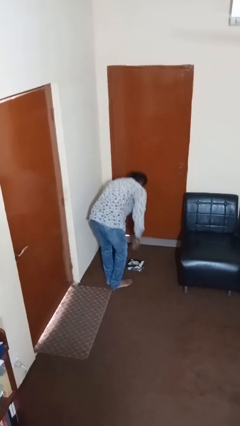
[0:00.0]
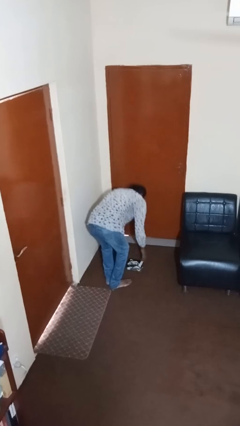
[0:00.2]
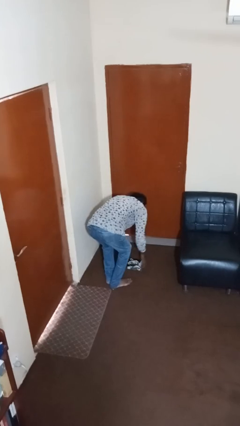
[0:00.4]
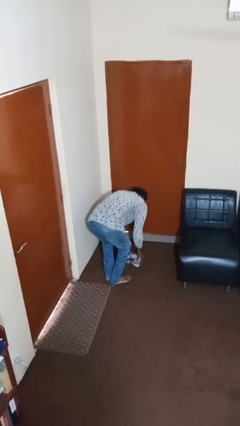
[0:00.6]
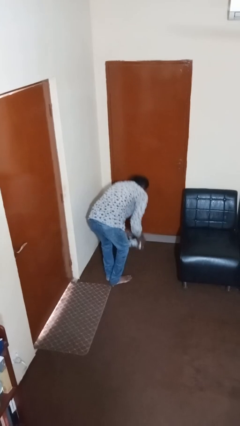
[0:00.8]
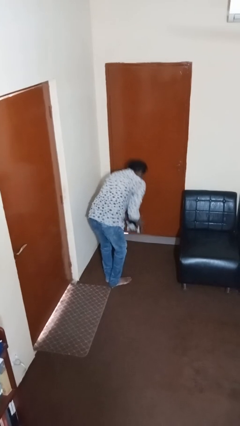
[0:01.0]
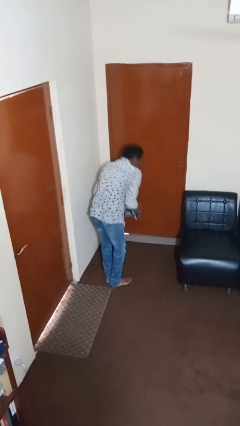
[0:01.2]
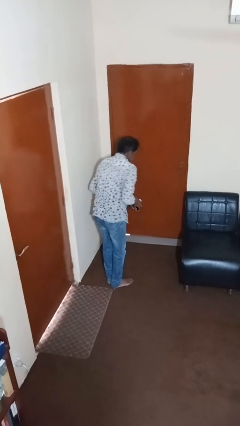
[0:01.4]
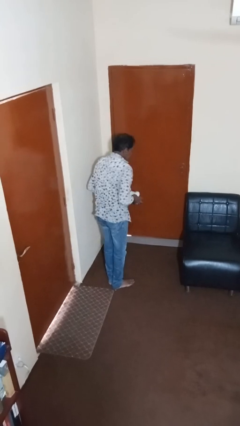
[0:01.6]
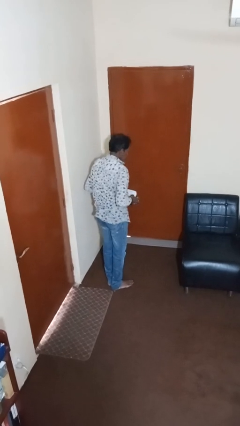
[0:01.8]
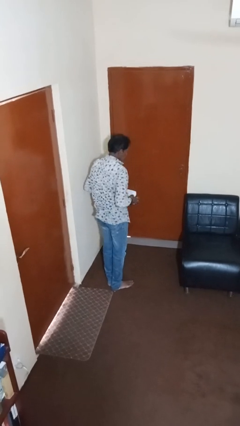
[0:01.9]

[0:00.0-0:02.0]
person picks up object from floor

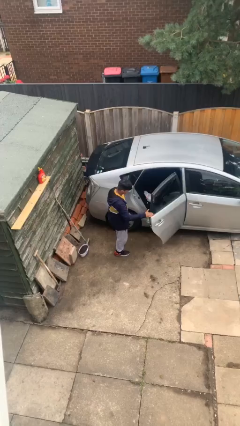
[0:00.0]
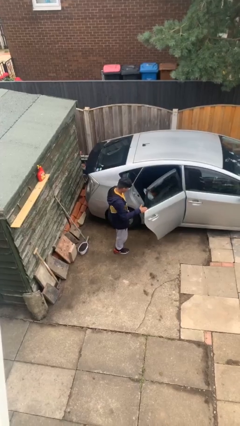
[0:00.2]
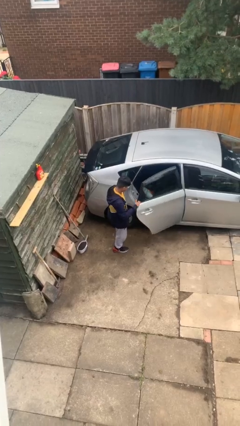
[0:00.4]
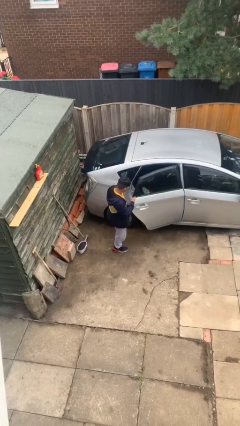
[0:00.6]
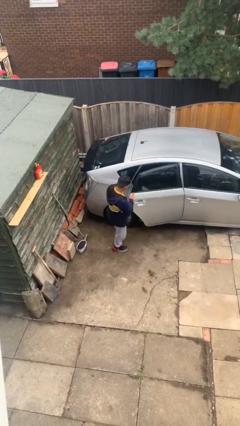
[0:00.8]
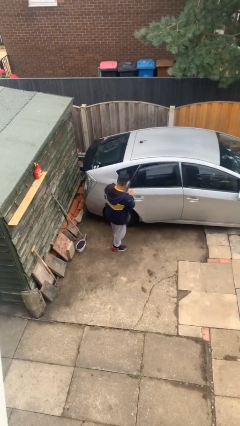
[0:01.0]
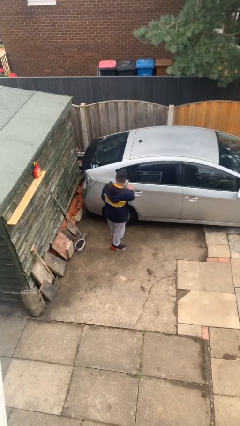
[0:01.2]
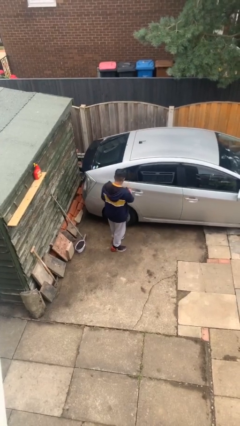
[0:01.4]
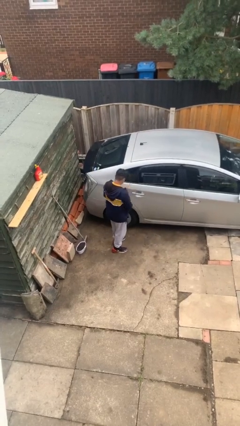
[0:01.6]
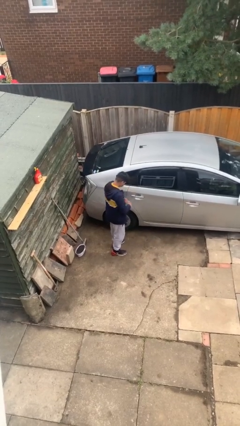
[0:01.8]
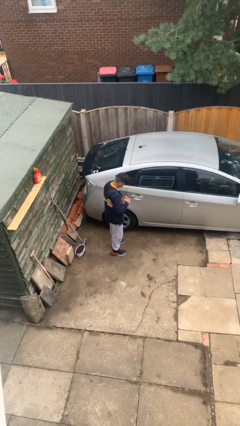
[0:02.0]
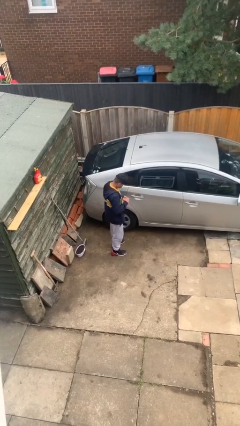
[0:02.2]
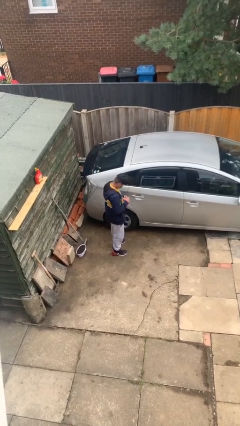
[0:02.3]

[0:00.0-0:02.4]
person closes car door

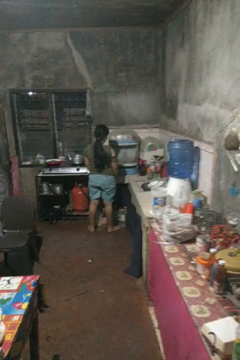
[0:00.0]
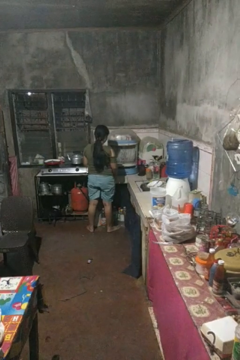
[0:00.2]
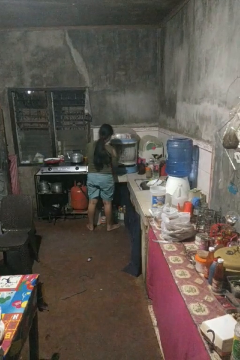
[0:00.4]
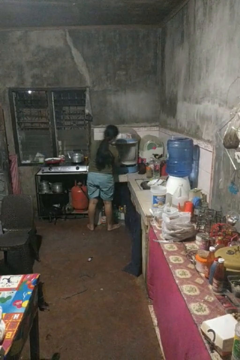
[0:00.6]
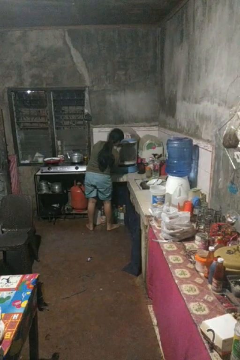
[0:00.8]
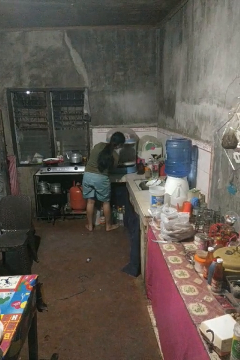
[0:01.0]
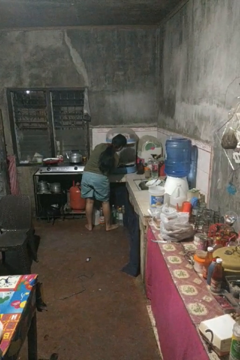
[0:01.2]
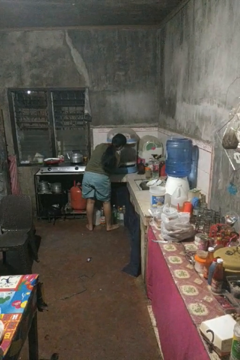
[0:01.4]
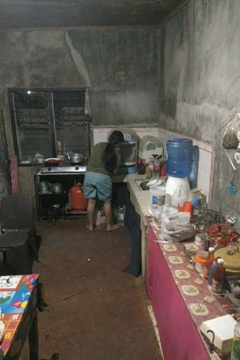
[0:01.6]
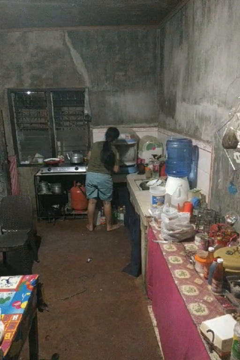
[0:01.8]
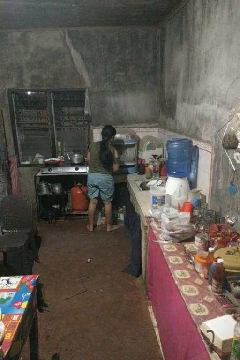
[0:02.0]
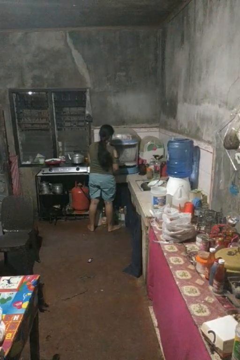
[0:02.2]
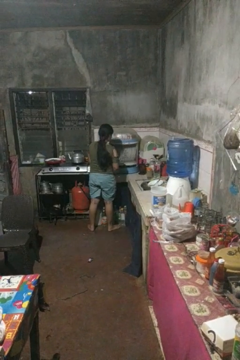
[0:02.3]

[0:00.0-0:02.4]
person searches in kitchen drawer

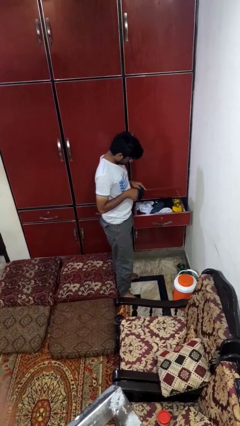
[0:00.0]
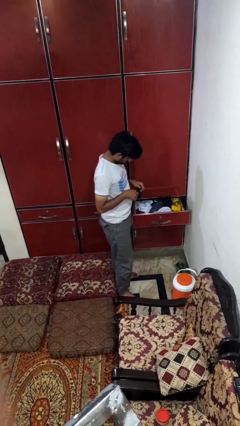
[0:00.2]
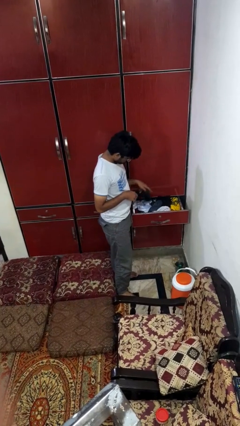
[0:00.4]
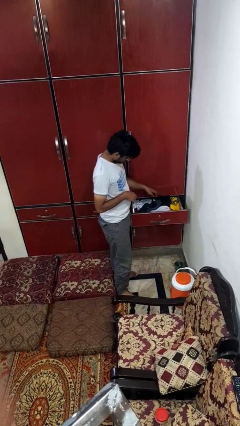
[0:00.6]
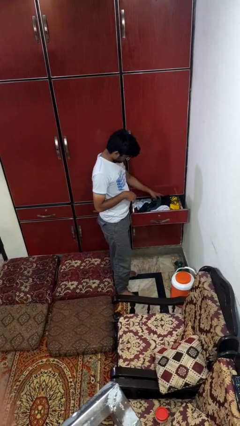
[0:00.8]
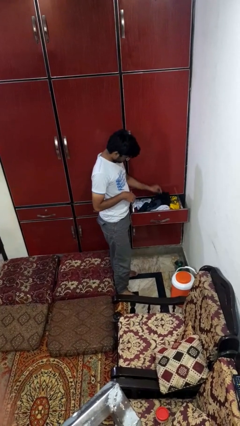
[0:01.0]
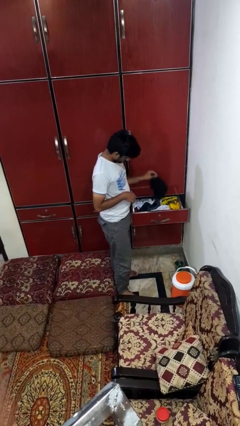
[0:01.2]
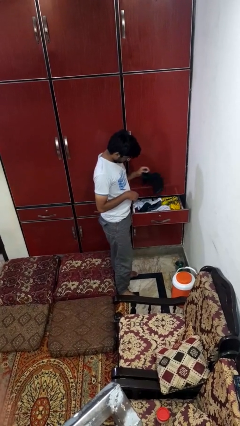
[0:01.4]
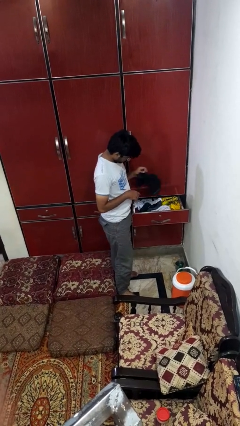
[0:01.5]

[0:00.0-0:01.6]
person puts clothes into dresser

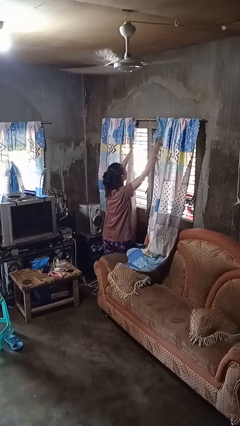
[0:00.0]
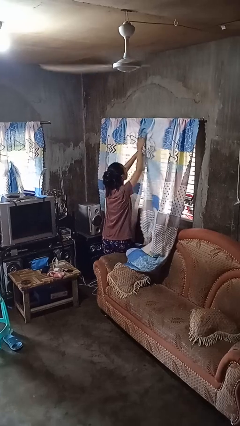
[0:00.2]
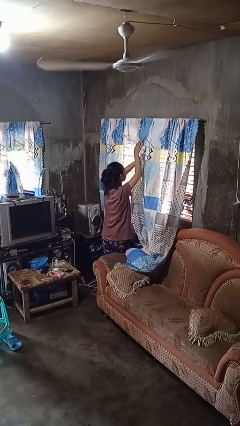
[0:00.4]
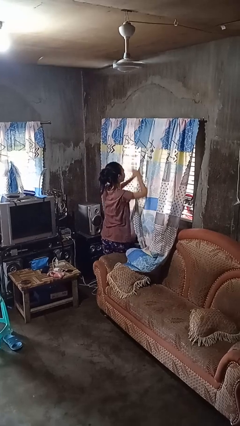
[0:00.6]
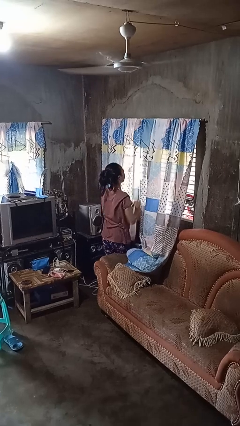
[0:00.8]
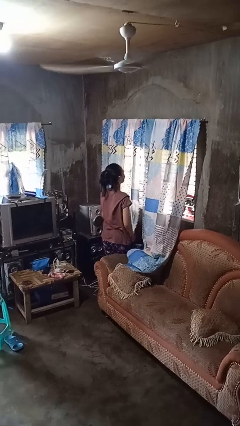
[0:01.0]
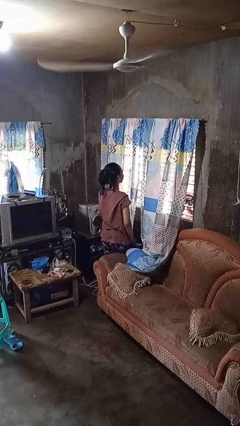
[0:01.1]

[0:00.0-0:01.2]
person closes curtains

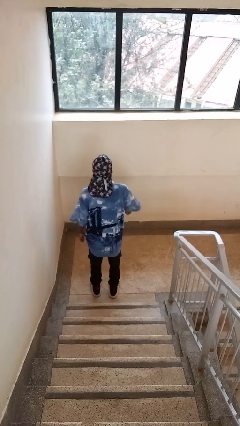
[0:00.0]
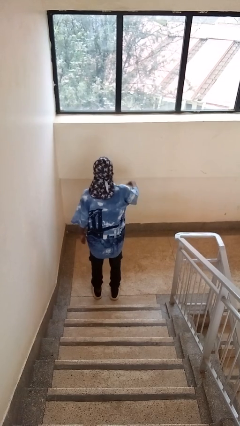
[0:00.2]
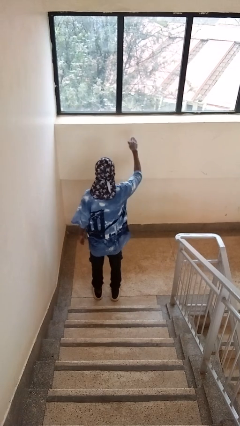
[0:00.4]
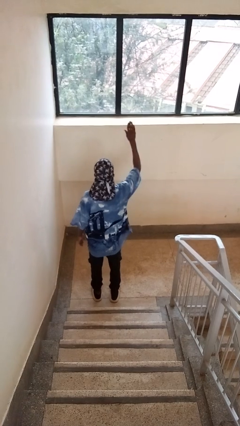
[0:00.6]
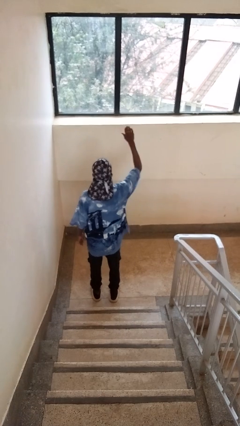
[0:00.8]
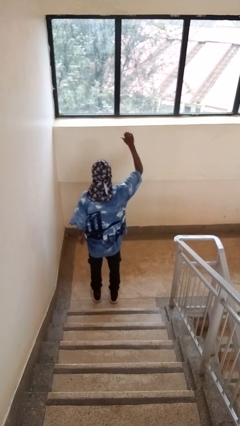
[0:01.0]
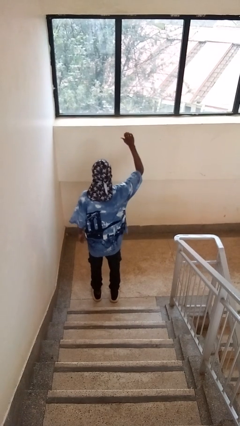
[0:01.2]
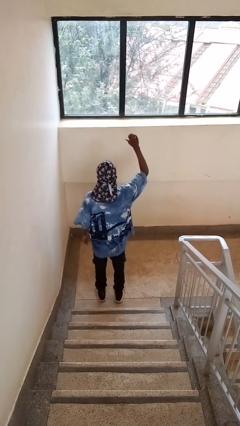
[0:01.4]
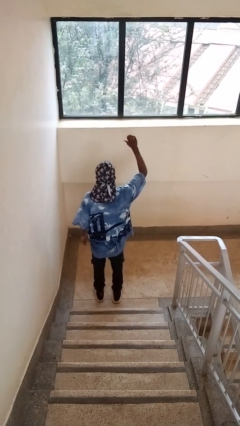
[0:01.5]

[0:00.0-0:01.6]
person gestures swipe up

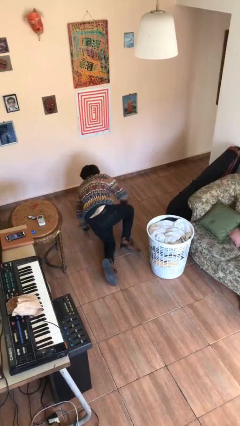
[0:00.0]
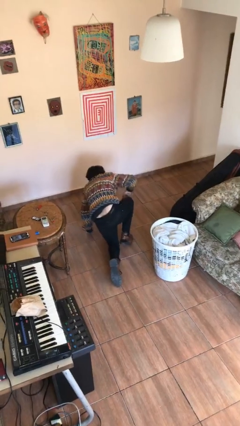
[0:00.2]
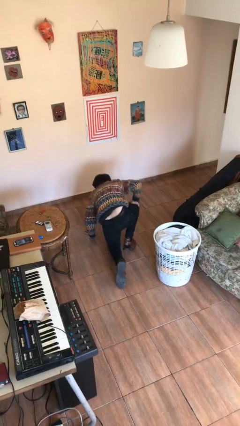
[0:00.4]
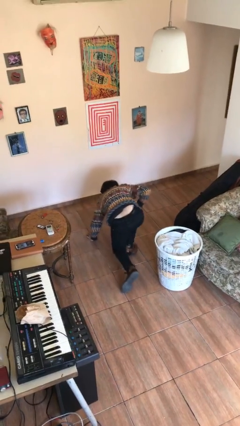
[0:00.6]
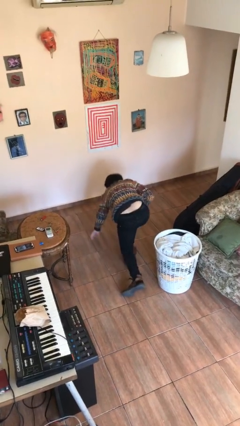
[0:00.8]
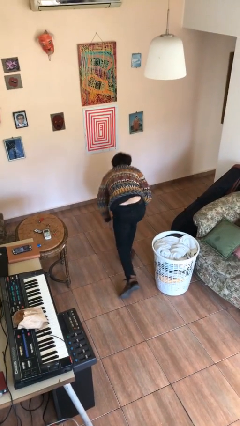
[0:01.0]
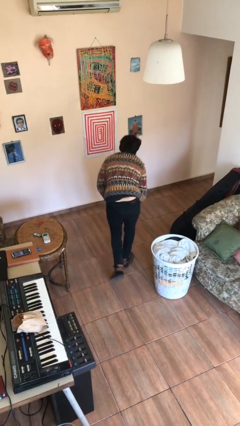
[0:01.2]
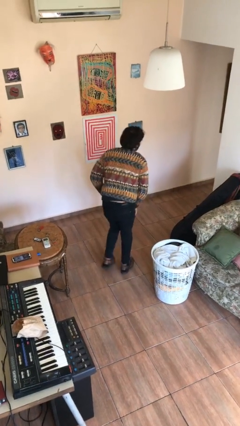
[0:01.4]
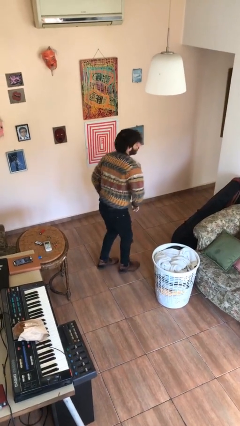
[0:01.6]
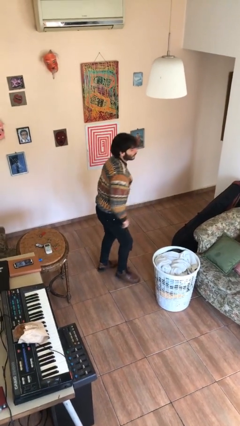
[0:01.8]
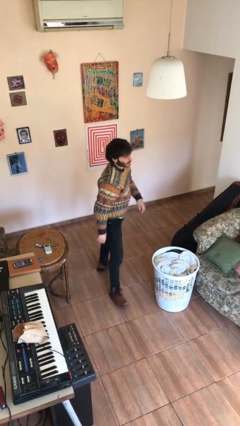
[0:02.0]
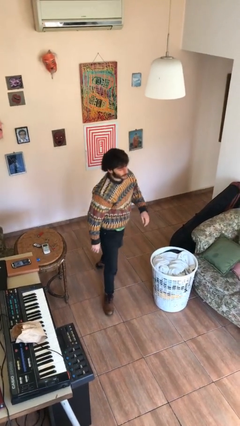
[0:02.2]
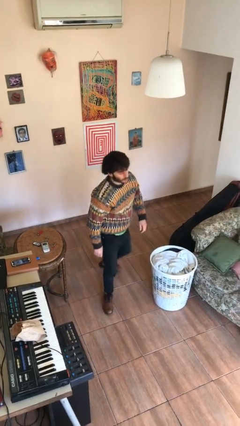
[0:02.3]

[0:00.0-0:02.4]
person stands up from floor

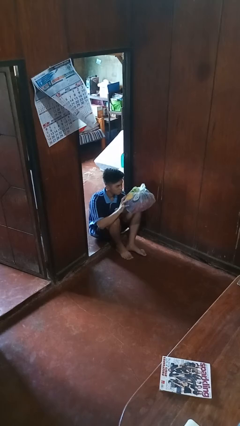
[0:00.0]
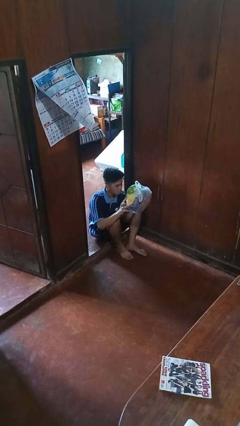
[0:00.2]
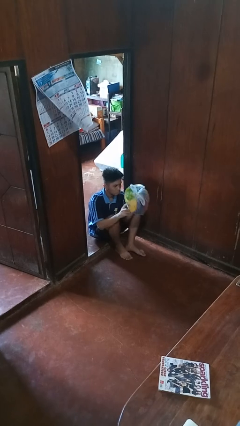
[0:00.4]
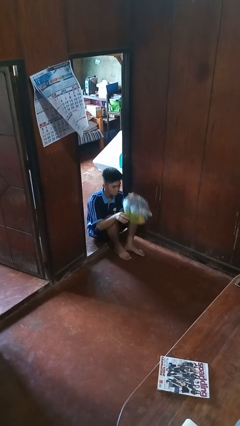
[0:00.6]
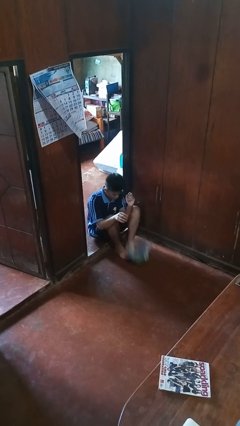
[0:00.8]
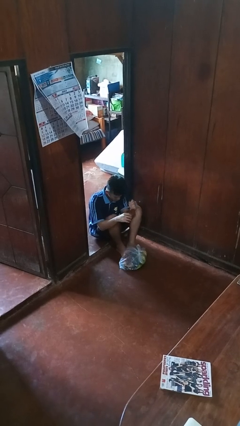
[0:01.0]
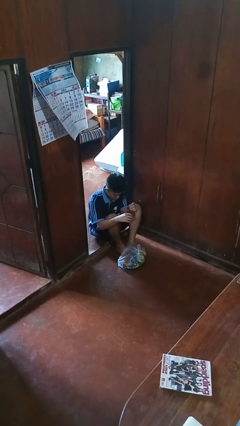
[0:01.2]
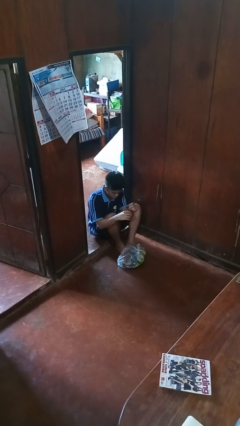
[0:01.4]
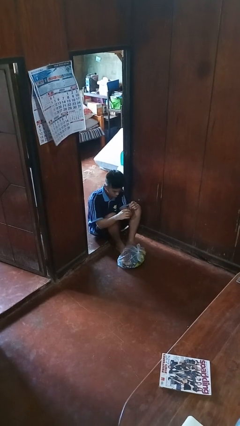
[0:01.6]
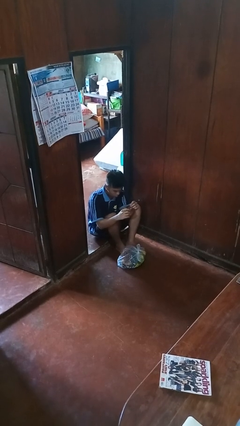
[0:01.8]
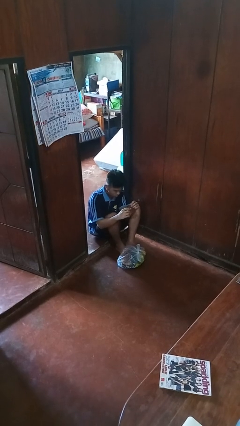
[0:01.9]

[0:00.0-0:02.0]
person drops object

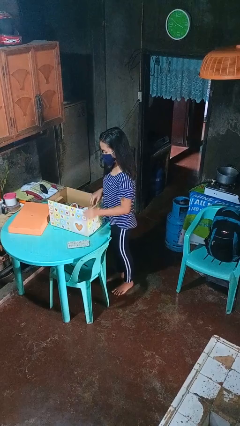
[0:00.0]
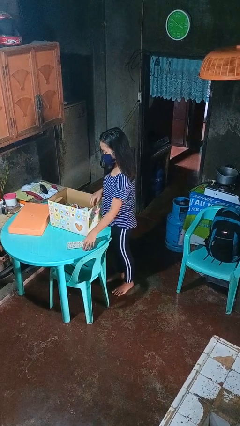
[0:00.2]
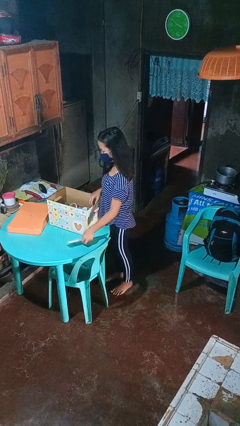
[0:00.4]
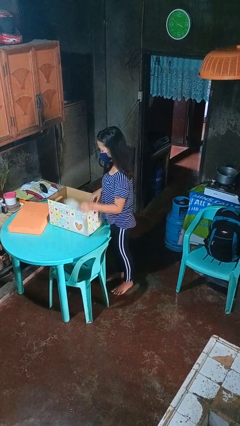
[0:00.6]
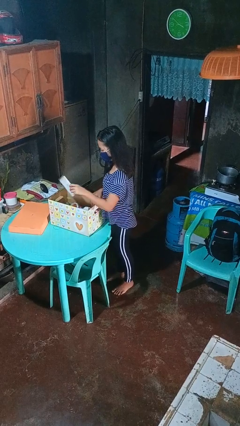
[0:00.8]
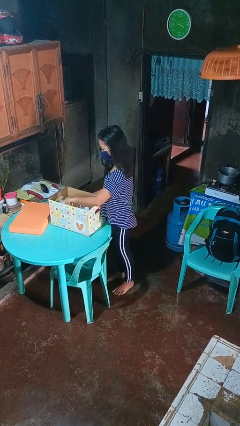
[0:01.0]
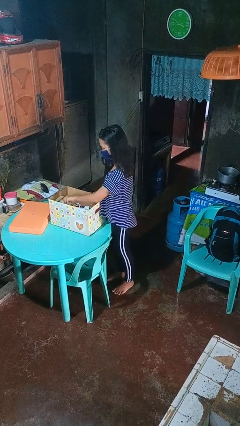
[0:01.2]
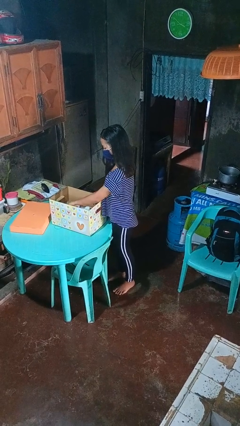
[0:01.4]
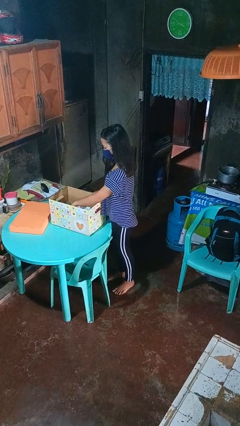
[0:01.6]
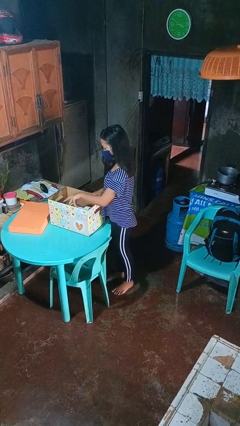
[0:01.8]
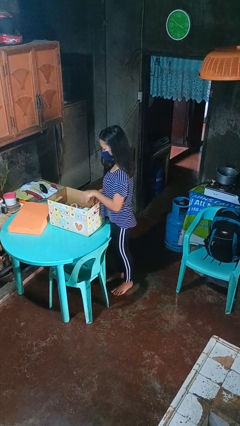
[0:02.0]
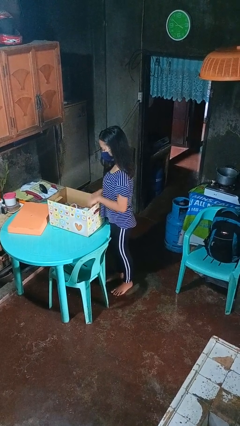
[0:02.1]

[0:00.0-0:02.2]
person puts object into box
